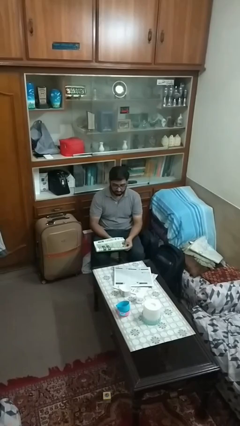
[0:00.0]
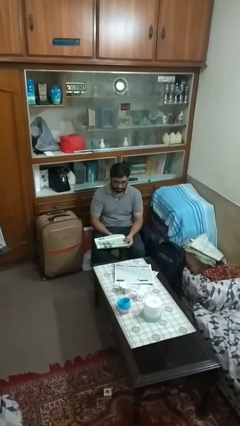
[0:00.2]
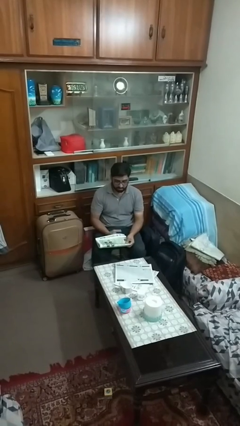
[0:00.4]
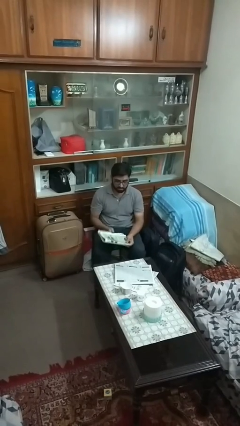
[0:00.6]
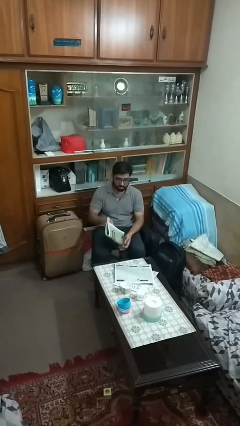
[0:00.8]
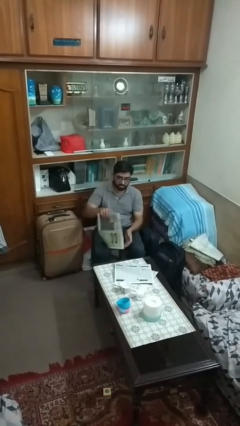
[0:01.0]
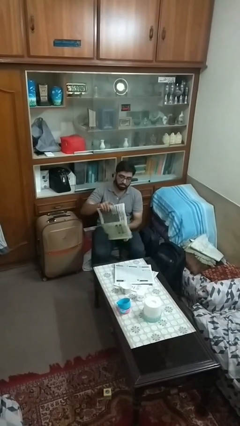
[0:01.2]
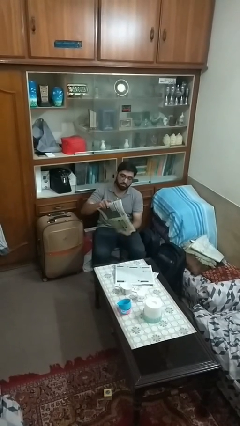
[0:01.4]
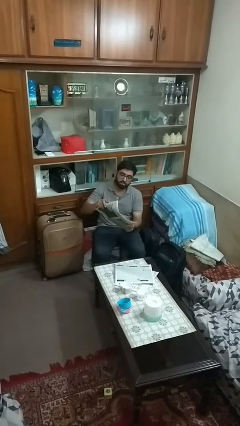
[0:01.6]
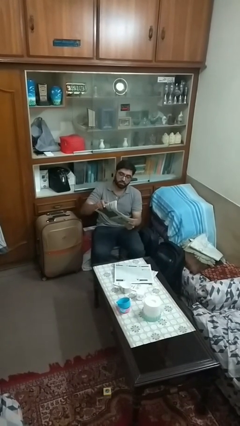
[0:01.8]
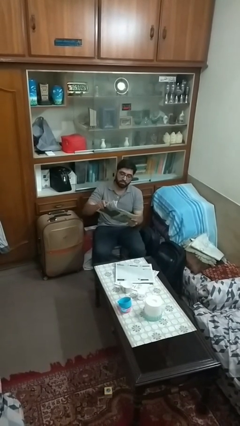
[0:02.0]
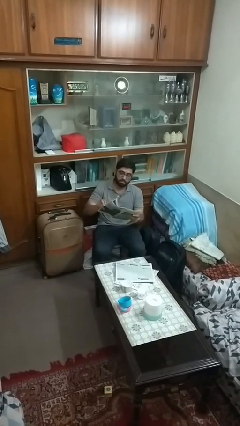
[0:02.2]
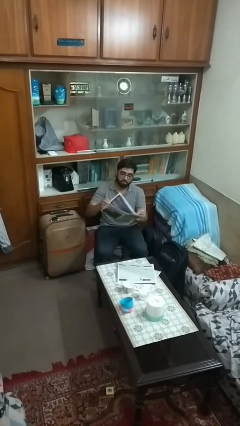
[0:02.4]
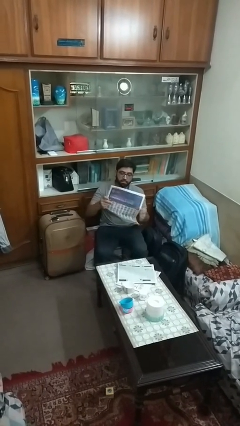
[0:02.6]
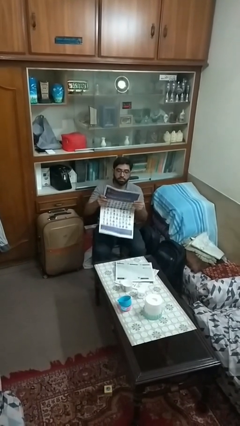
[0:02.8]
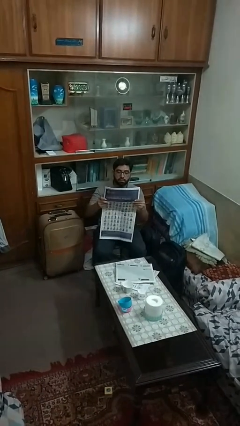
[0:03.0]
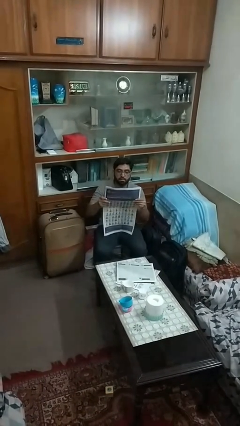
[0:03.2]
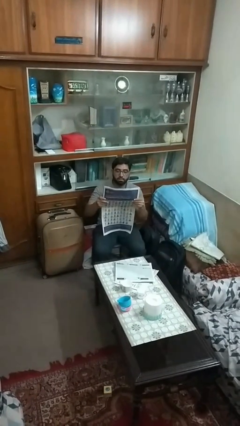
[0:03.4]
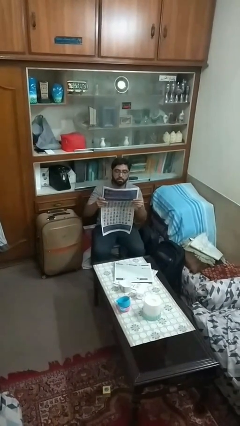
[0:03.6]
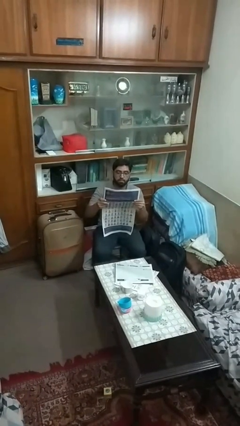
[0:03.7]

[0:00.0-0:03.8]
person reads newspaper

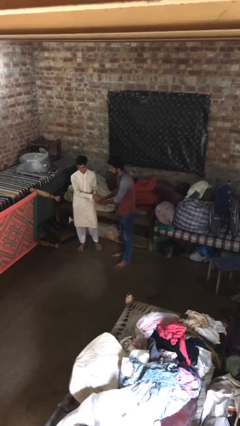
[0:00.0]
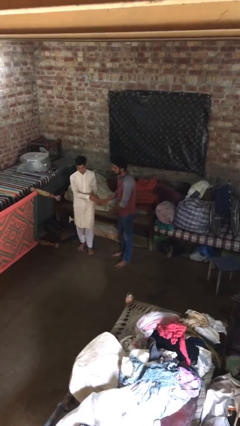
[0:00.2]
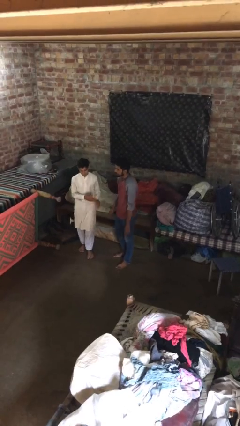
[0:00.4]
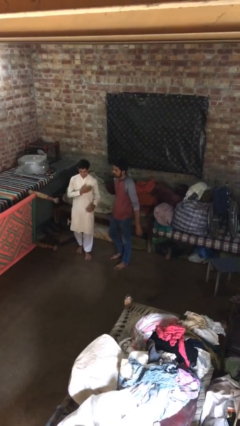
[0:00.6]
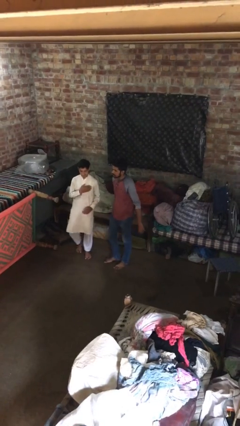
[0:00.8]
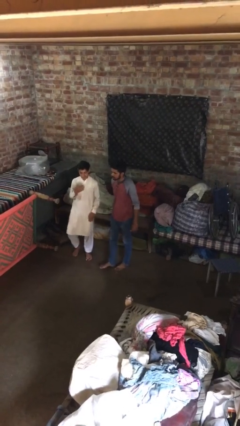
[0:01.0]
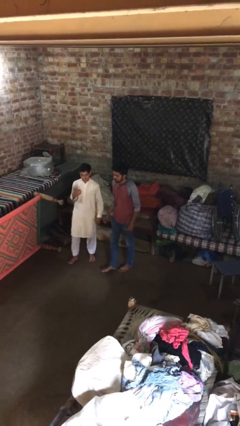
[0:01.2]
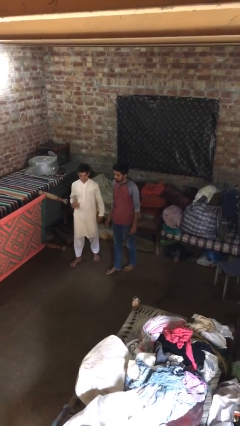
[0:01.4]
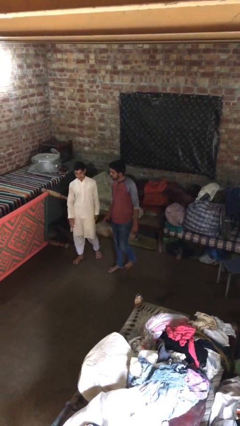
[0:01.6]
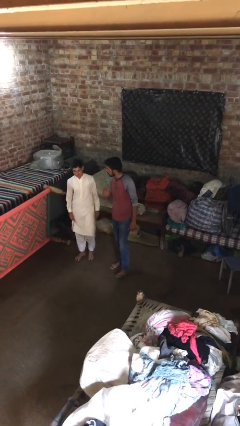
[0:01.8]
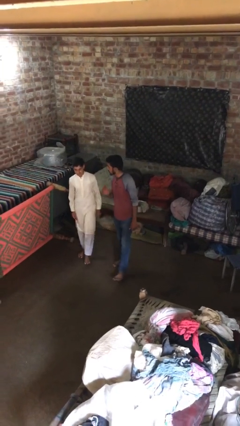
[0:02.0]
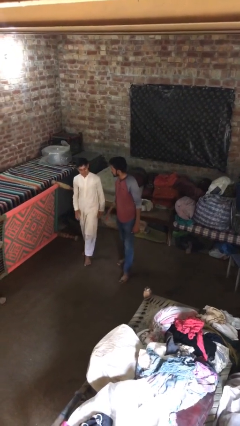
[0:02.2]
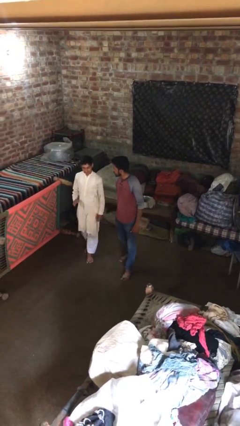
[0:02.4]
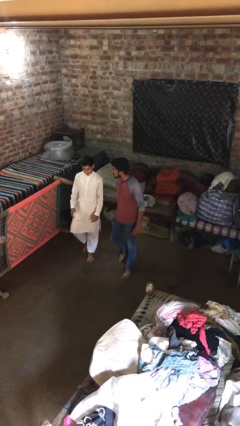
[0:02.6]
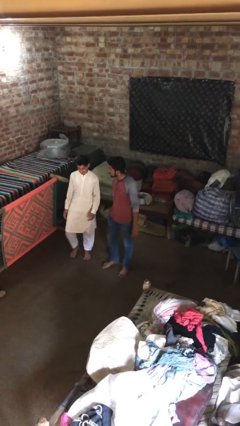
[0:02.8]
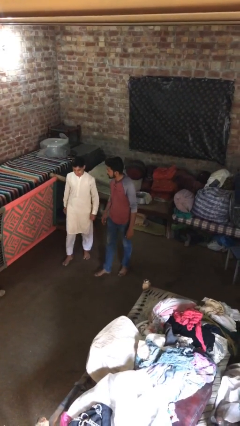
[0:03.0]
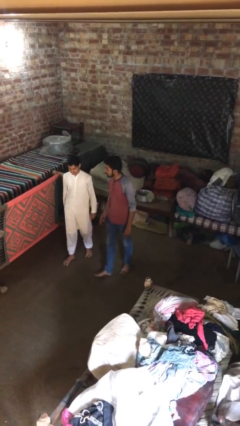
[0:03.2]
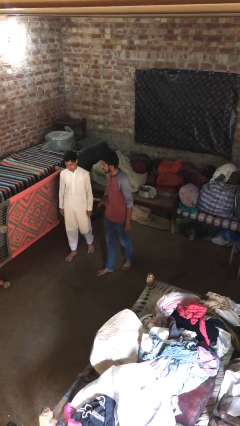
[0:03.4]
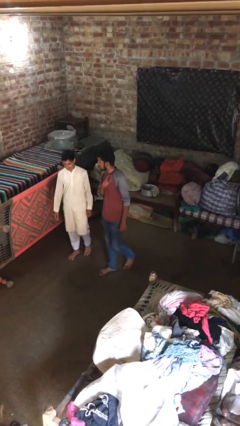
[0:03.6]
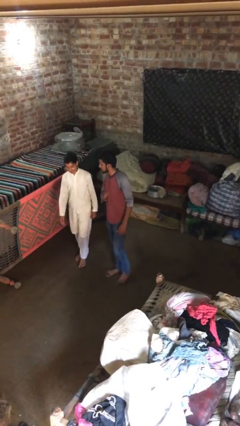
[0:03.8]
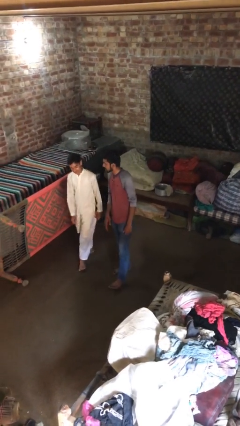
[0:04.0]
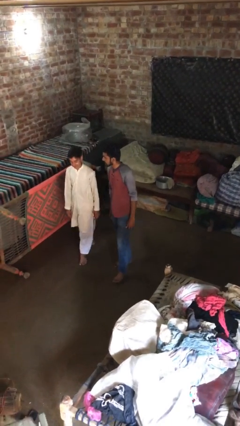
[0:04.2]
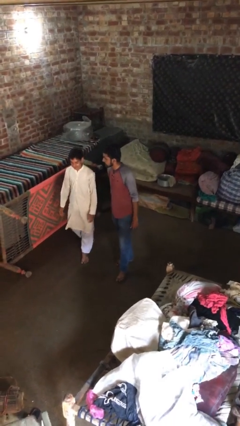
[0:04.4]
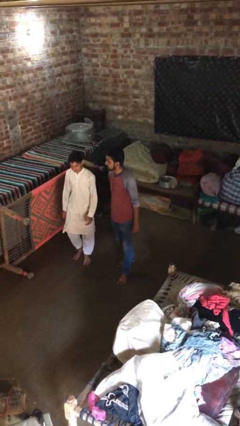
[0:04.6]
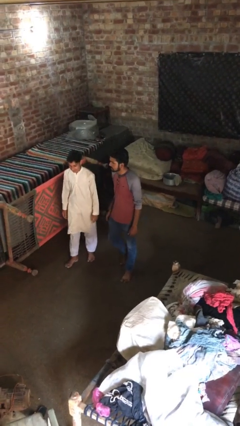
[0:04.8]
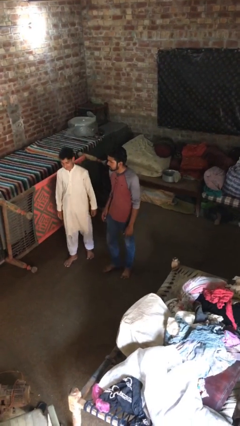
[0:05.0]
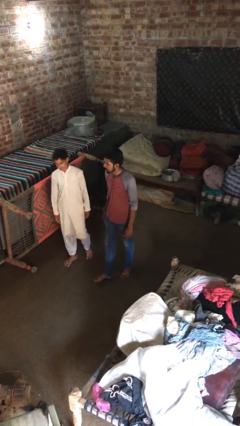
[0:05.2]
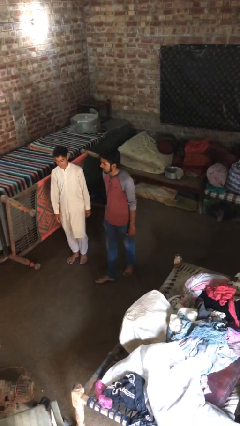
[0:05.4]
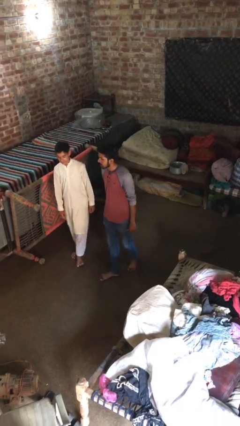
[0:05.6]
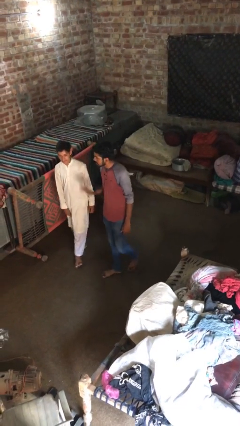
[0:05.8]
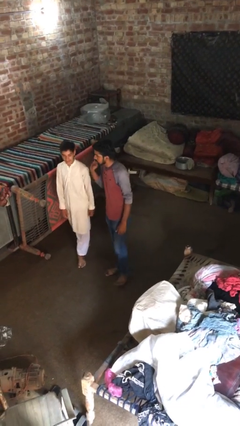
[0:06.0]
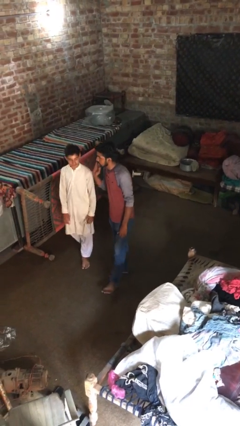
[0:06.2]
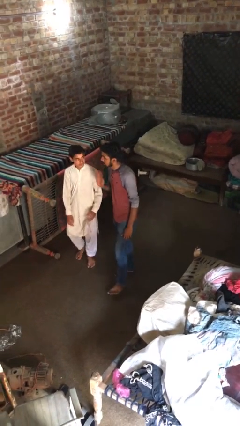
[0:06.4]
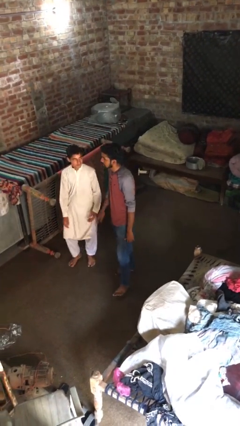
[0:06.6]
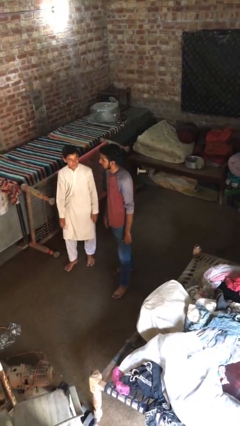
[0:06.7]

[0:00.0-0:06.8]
person talks to person

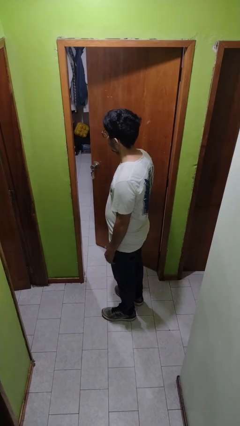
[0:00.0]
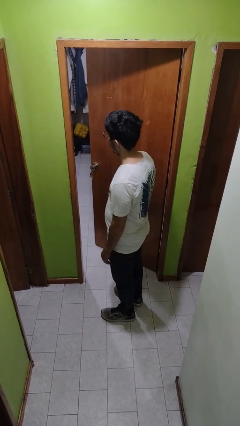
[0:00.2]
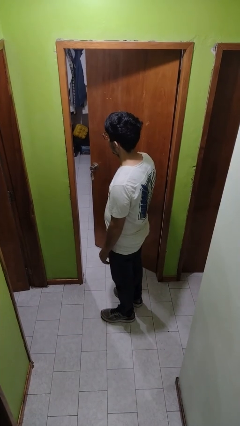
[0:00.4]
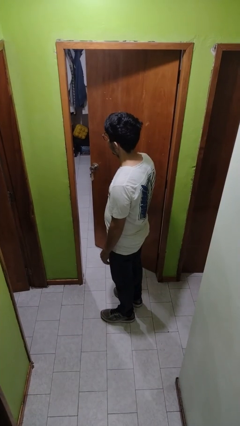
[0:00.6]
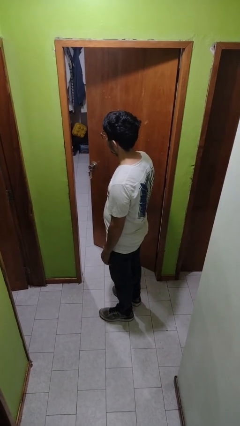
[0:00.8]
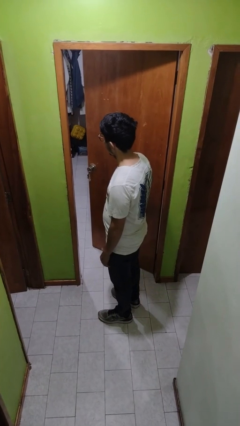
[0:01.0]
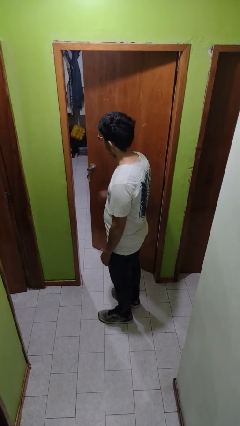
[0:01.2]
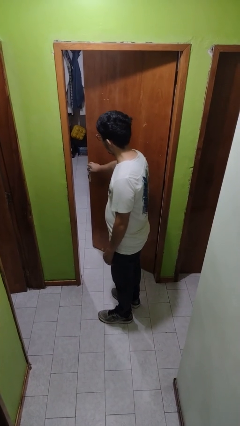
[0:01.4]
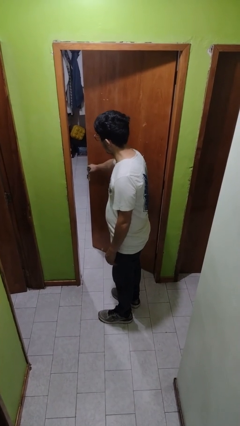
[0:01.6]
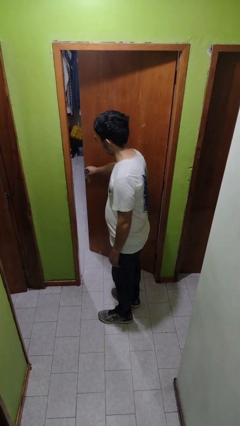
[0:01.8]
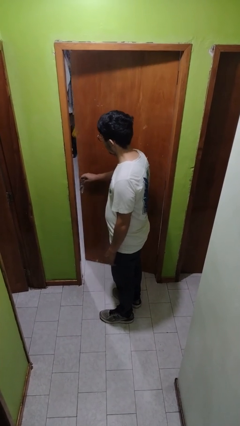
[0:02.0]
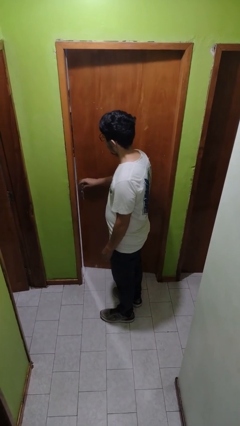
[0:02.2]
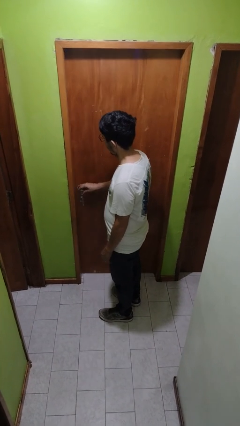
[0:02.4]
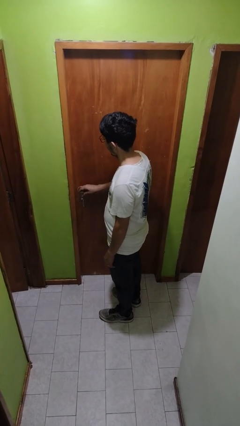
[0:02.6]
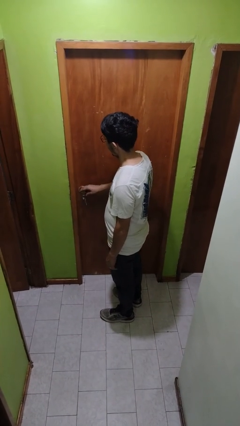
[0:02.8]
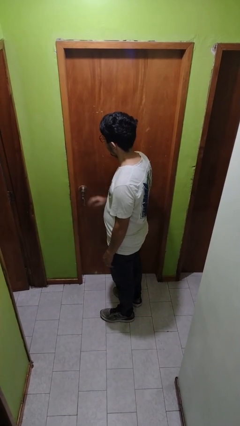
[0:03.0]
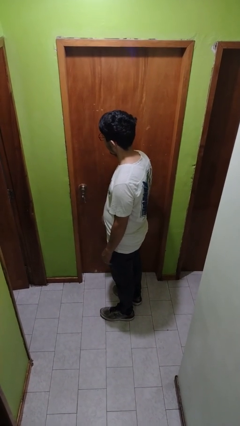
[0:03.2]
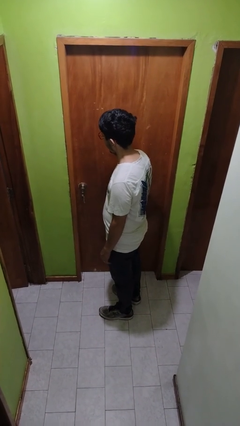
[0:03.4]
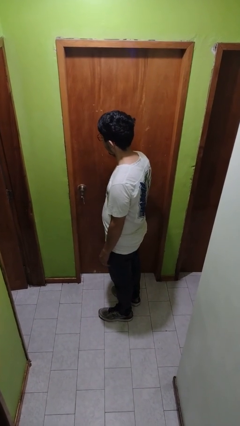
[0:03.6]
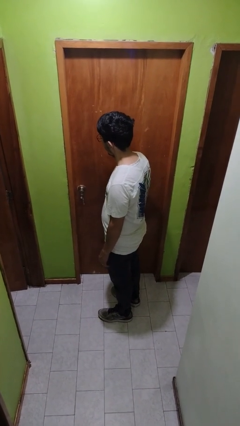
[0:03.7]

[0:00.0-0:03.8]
person closes facility door

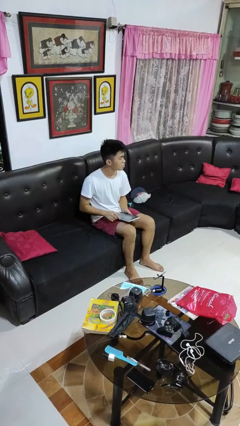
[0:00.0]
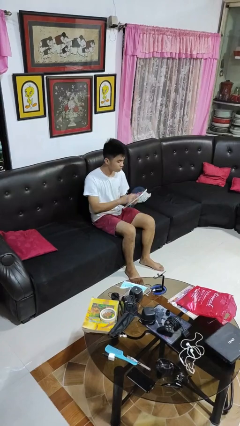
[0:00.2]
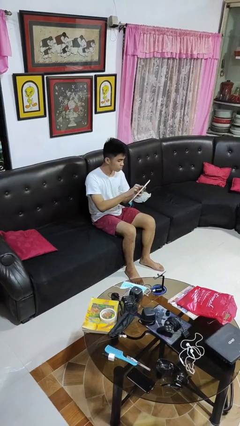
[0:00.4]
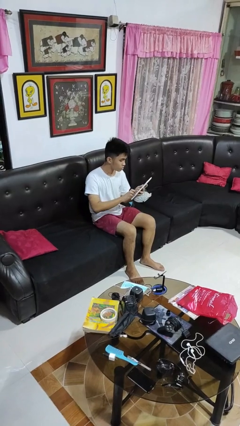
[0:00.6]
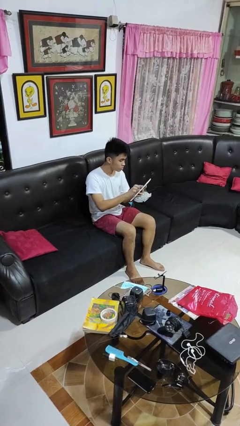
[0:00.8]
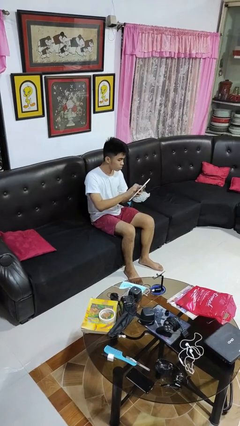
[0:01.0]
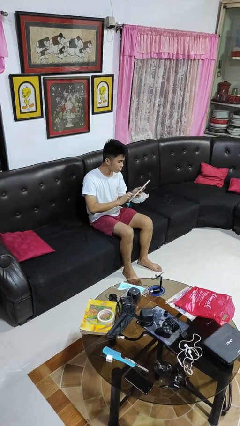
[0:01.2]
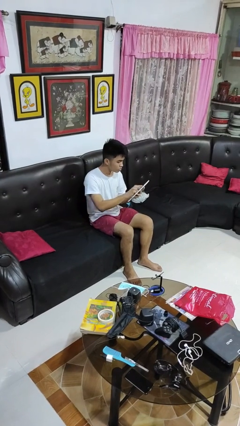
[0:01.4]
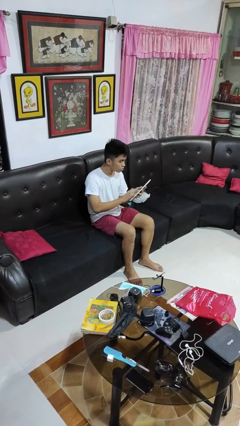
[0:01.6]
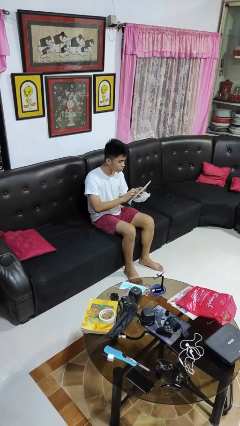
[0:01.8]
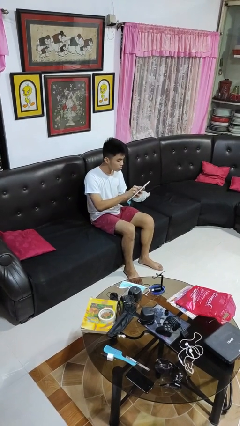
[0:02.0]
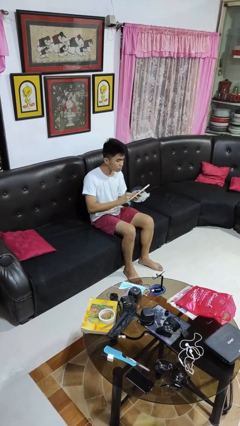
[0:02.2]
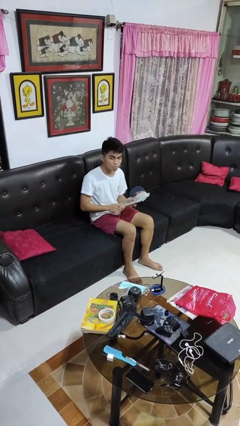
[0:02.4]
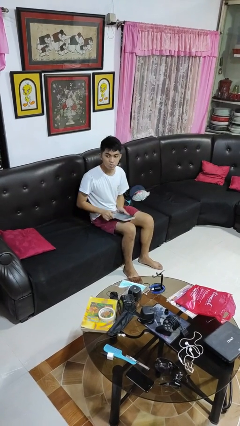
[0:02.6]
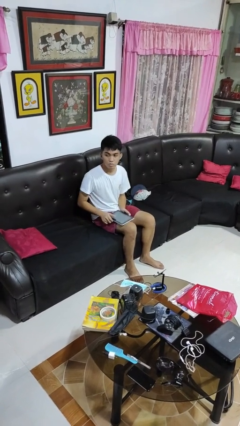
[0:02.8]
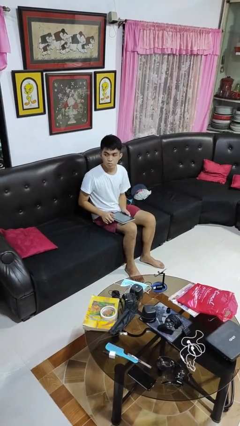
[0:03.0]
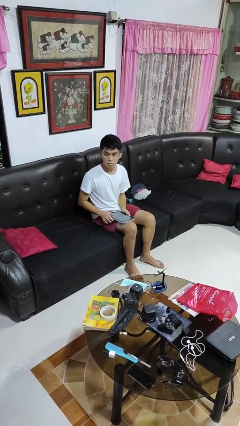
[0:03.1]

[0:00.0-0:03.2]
person interacts with tablet

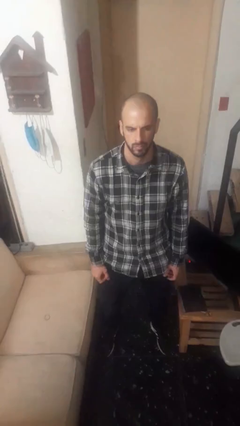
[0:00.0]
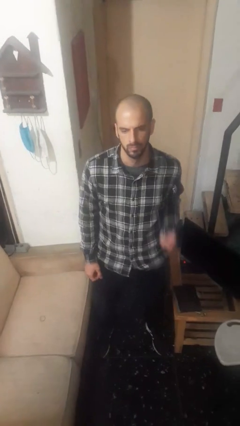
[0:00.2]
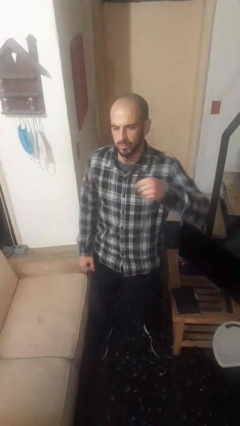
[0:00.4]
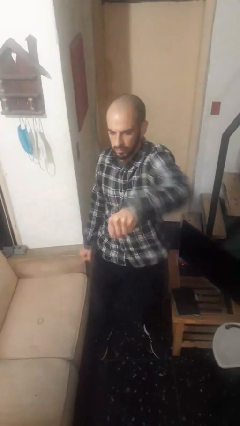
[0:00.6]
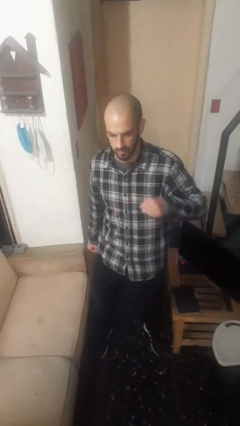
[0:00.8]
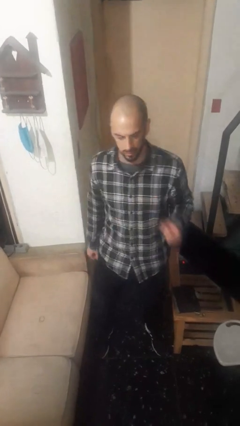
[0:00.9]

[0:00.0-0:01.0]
person punches
